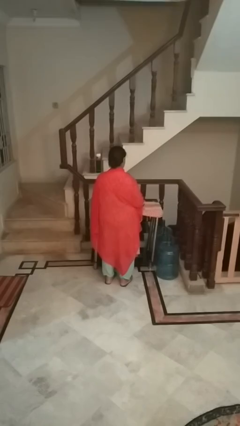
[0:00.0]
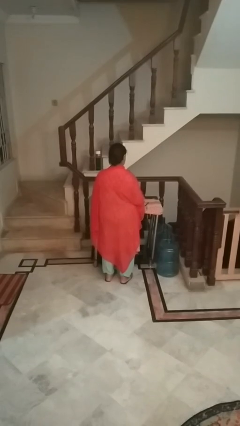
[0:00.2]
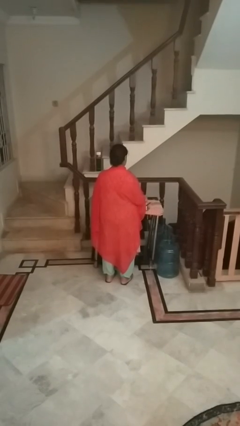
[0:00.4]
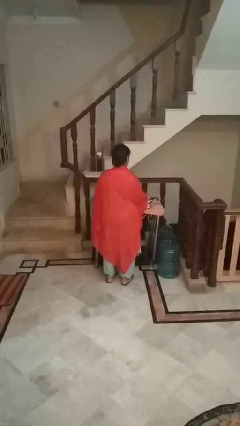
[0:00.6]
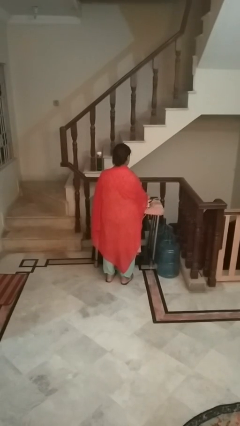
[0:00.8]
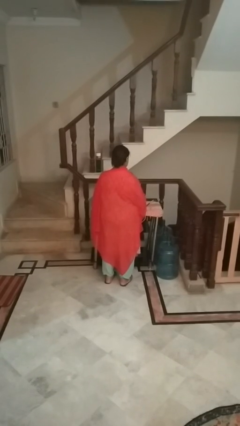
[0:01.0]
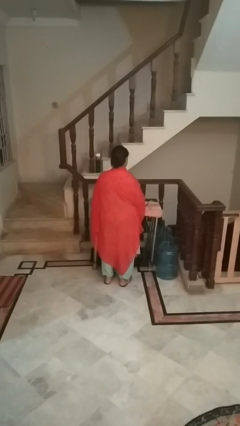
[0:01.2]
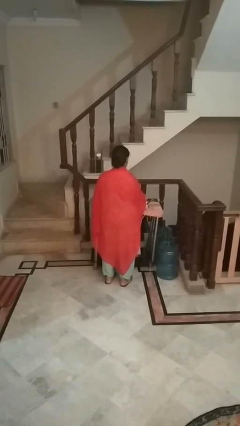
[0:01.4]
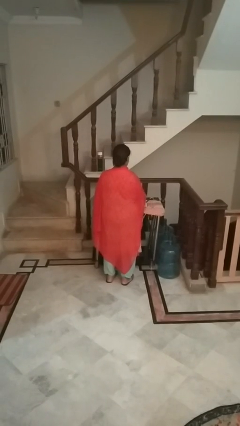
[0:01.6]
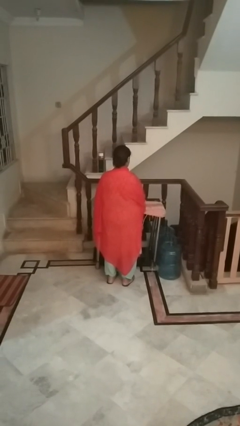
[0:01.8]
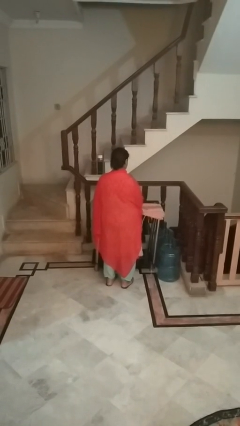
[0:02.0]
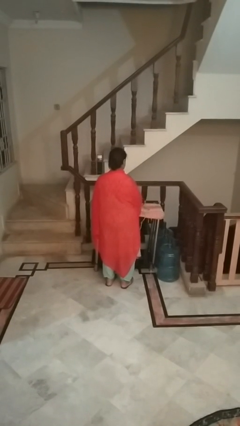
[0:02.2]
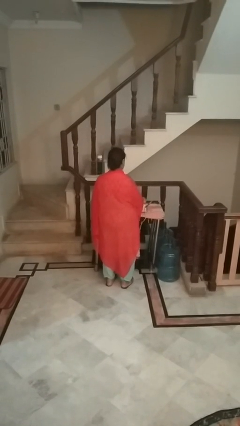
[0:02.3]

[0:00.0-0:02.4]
person irons clothes

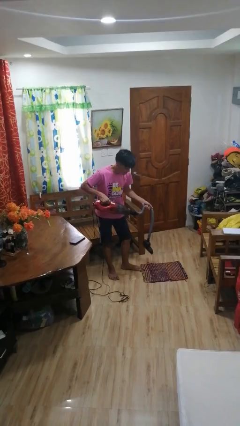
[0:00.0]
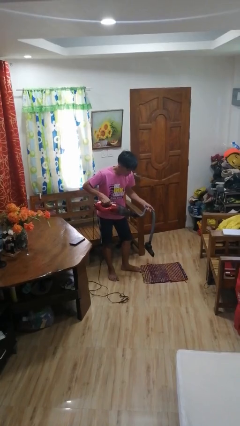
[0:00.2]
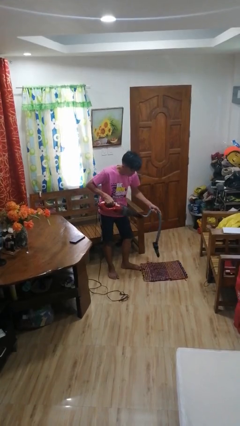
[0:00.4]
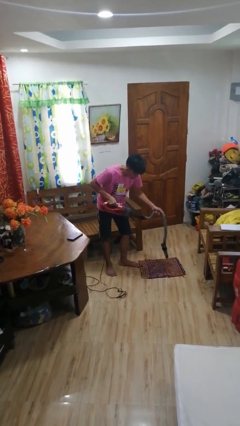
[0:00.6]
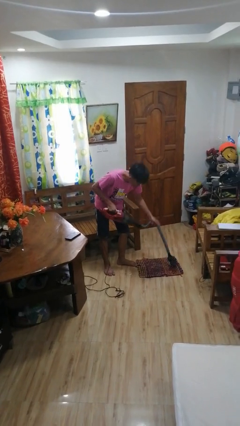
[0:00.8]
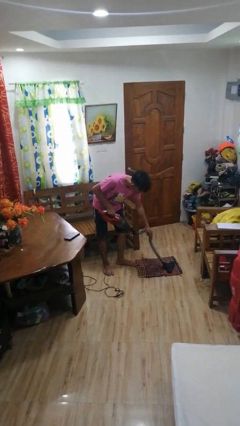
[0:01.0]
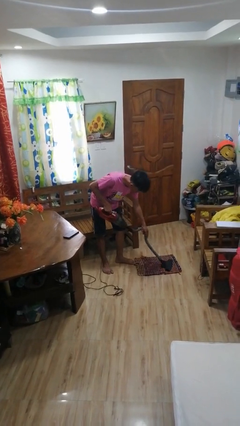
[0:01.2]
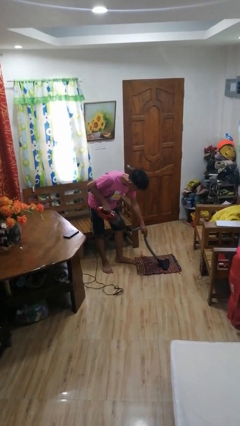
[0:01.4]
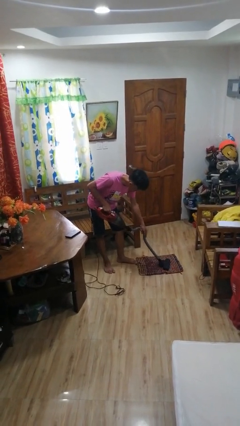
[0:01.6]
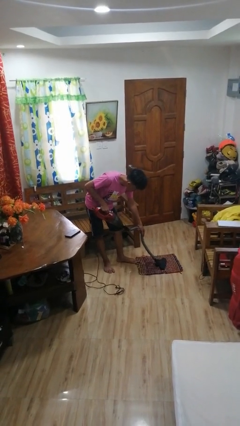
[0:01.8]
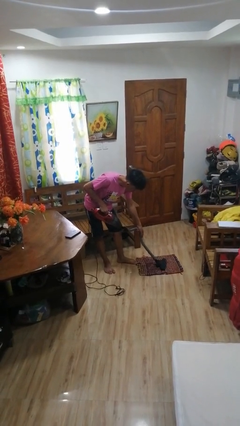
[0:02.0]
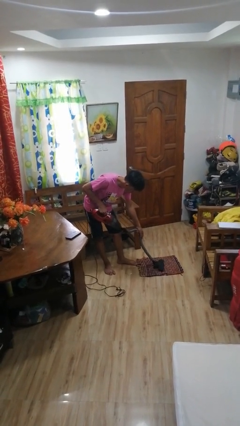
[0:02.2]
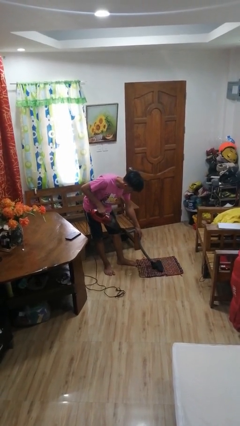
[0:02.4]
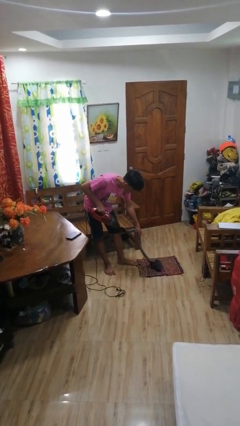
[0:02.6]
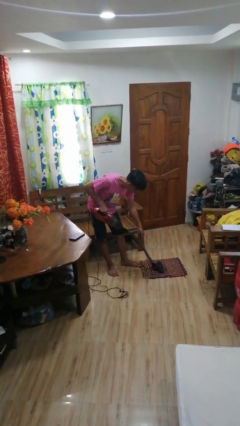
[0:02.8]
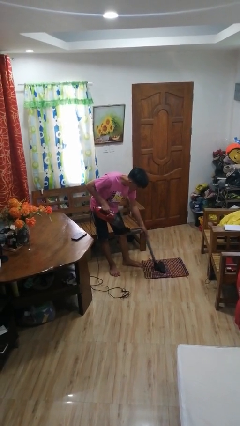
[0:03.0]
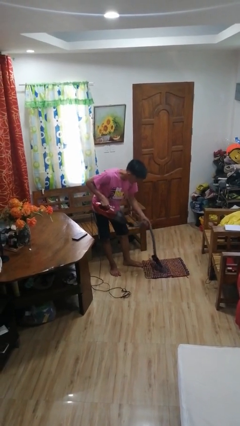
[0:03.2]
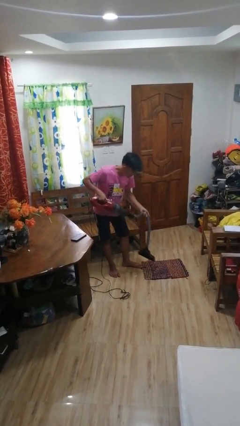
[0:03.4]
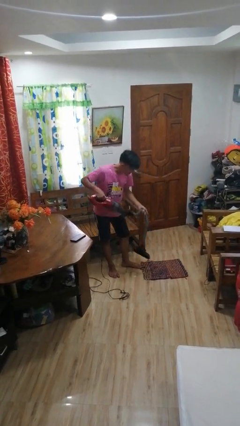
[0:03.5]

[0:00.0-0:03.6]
person vacuums carpet

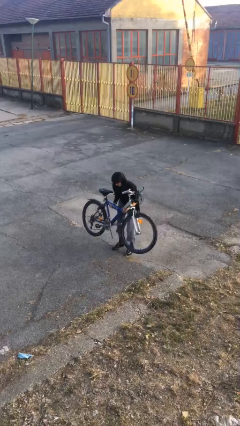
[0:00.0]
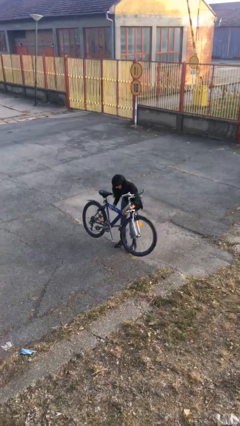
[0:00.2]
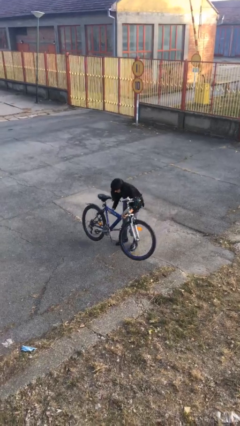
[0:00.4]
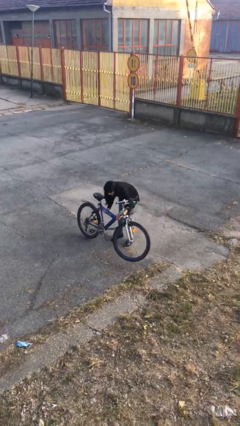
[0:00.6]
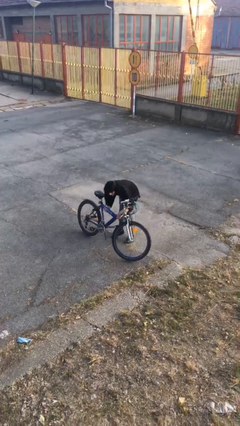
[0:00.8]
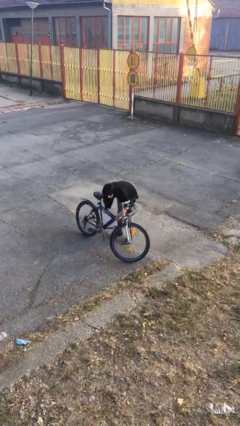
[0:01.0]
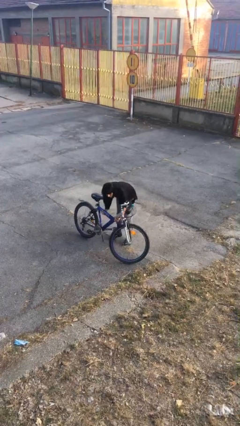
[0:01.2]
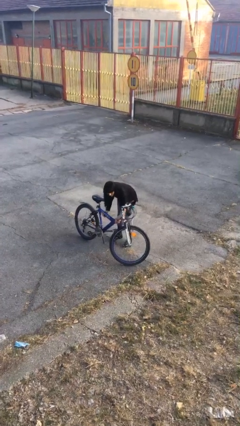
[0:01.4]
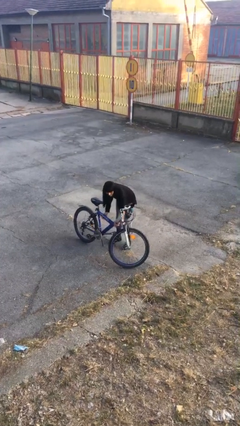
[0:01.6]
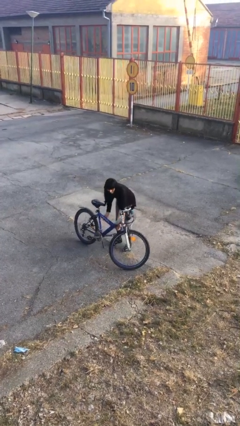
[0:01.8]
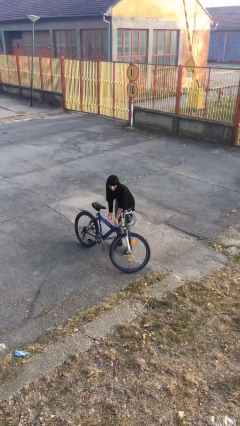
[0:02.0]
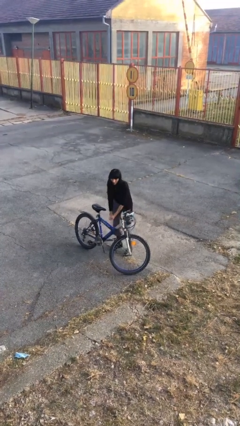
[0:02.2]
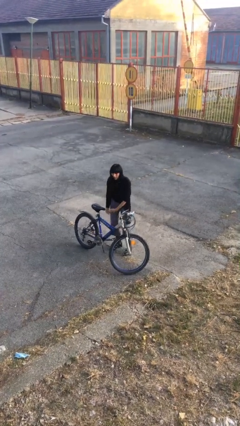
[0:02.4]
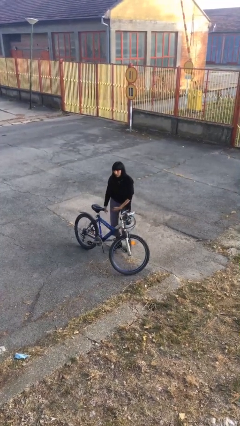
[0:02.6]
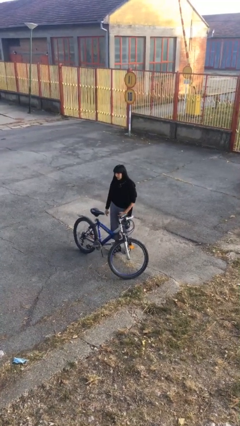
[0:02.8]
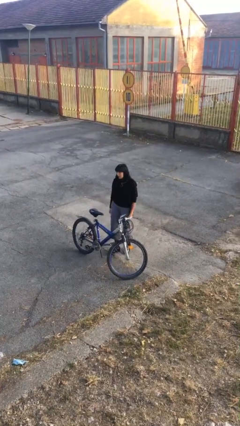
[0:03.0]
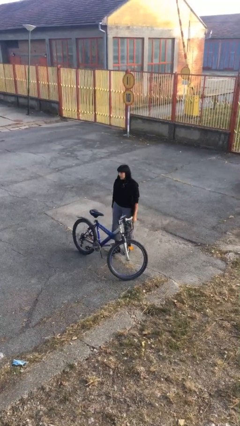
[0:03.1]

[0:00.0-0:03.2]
person puts down object on floor

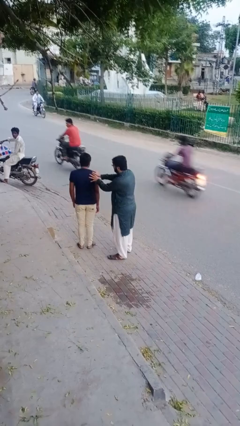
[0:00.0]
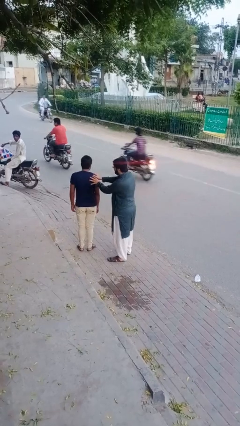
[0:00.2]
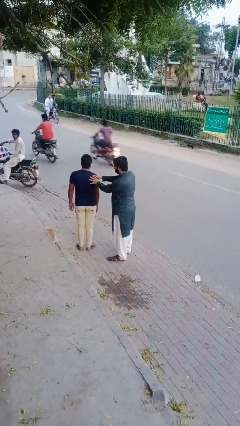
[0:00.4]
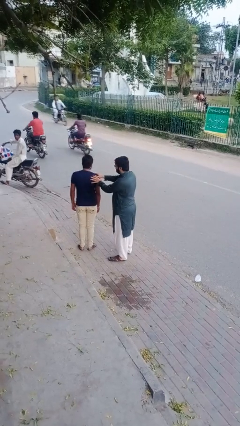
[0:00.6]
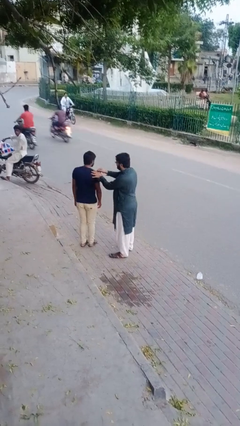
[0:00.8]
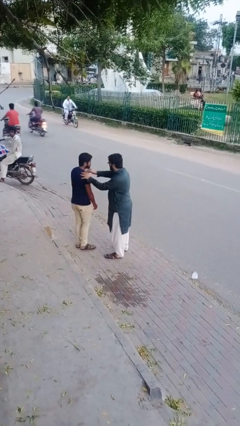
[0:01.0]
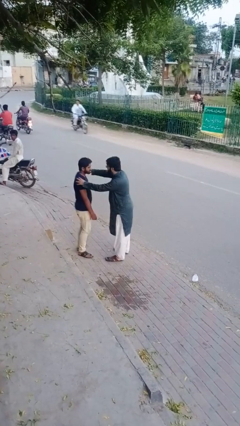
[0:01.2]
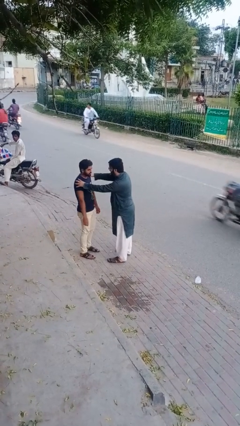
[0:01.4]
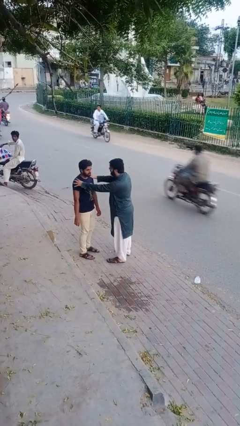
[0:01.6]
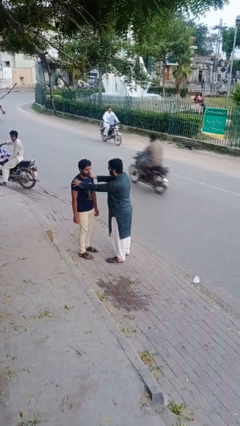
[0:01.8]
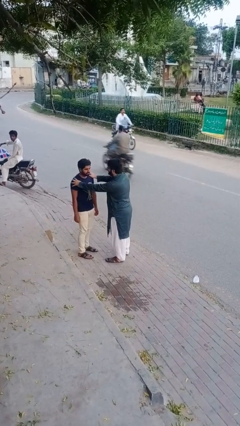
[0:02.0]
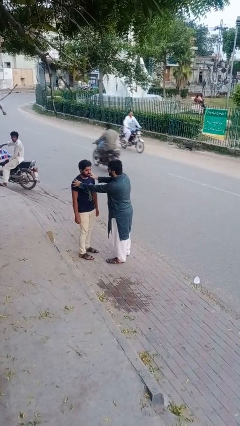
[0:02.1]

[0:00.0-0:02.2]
person spins person around

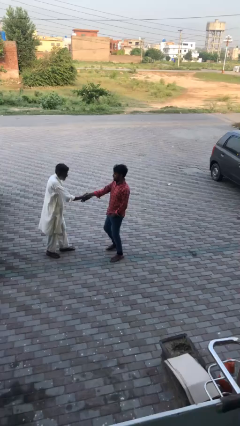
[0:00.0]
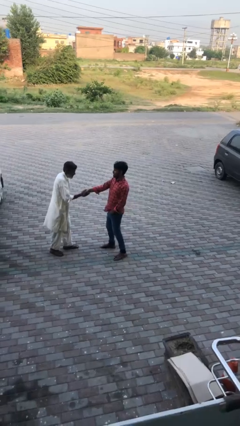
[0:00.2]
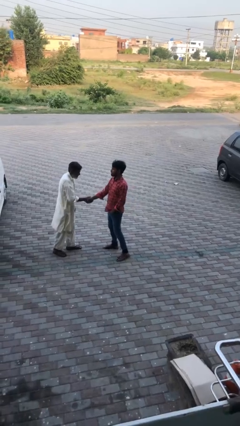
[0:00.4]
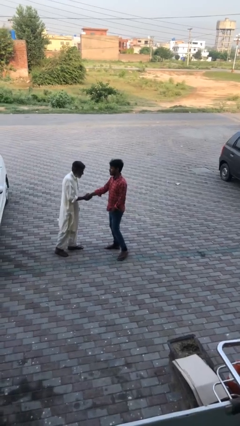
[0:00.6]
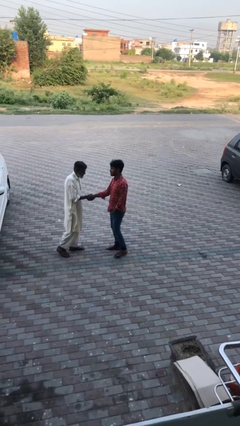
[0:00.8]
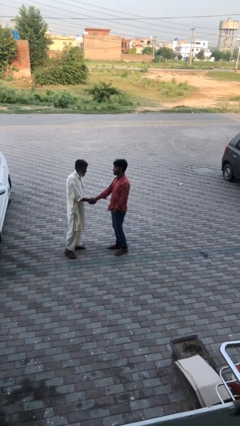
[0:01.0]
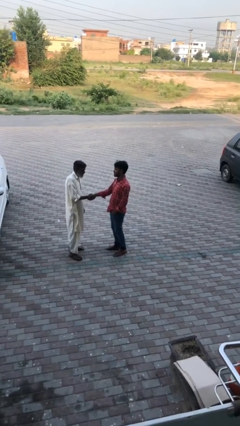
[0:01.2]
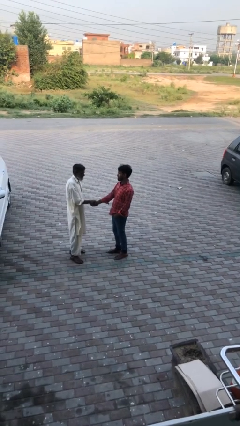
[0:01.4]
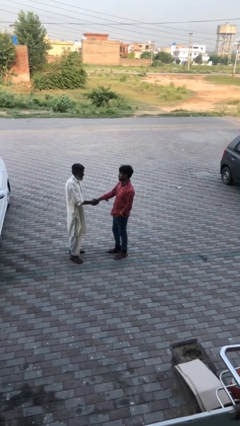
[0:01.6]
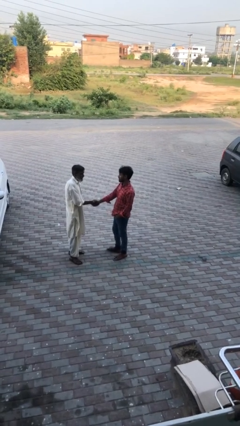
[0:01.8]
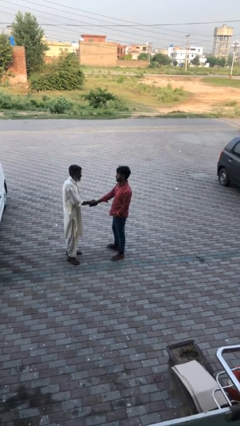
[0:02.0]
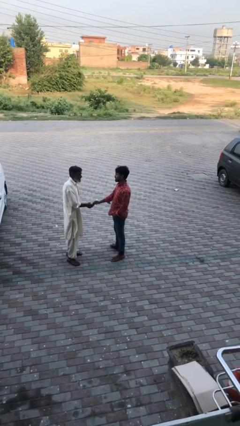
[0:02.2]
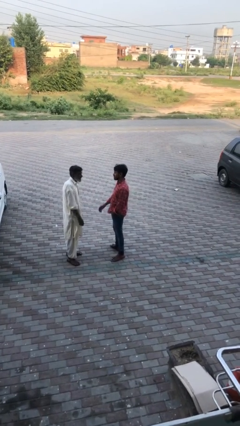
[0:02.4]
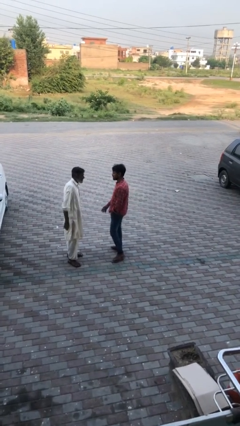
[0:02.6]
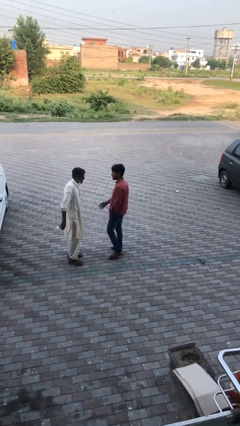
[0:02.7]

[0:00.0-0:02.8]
person shakes hand

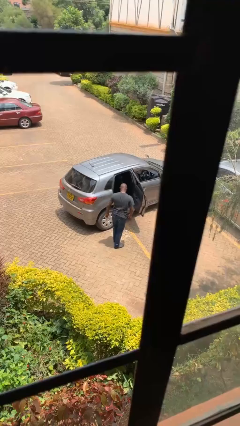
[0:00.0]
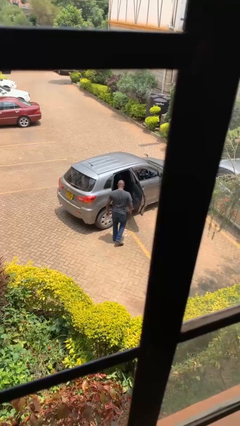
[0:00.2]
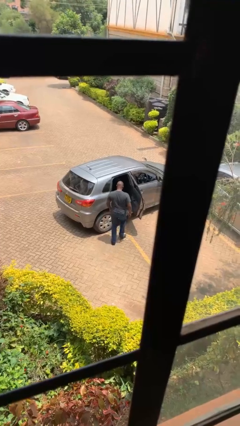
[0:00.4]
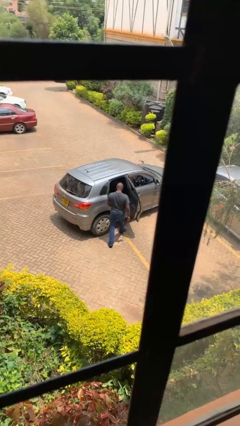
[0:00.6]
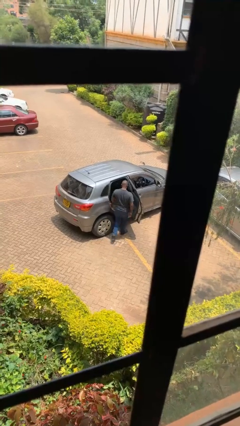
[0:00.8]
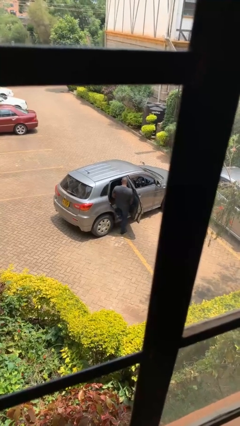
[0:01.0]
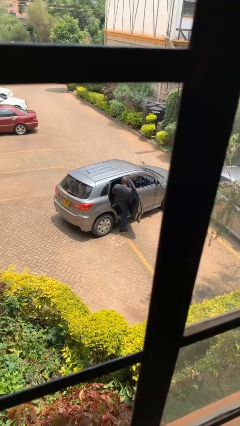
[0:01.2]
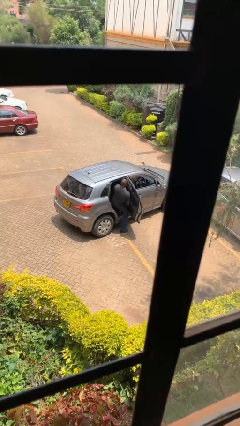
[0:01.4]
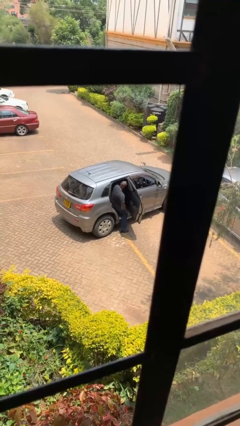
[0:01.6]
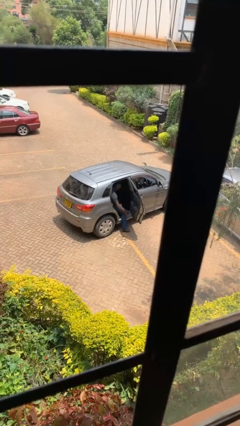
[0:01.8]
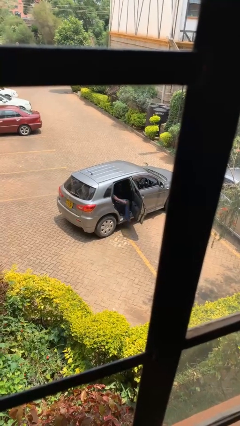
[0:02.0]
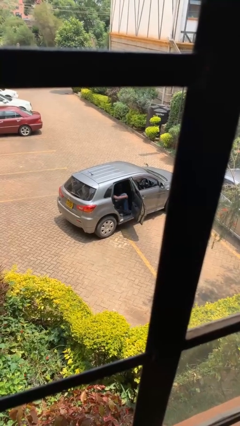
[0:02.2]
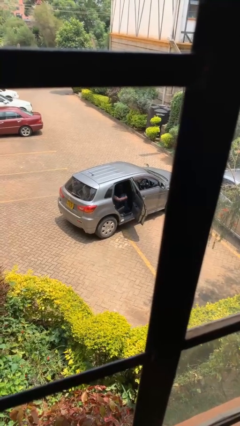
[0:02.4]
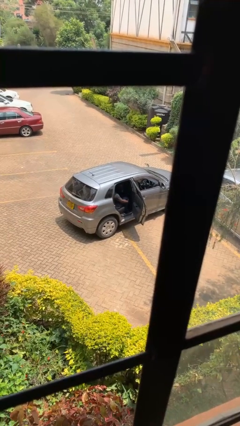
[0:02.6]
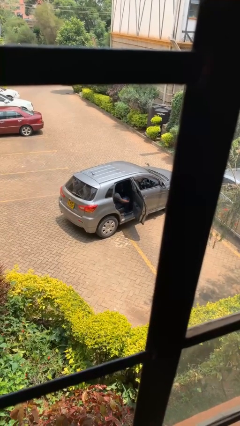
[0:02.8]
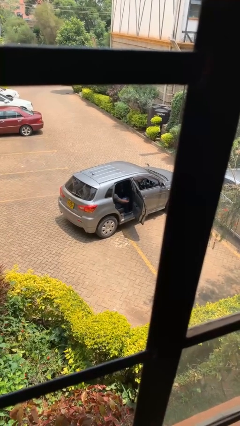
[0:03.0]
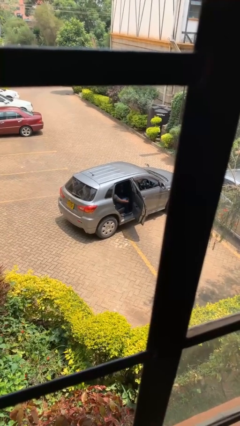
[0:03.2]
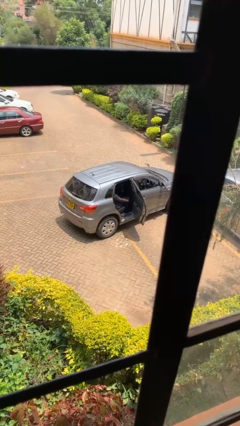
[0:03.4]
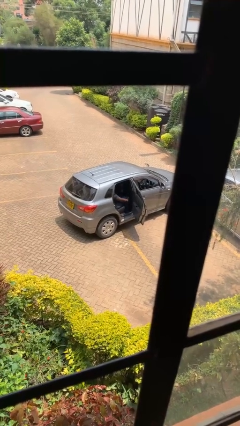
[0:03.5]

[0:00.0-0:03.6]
person enters car
